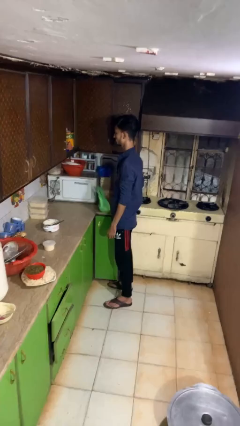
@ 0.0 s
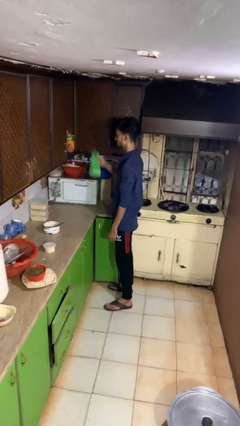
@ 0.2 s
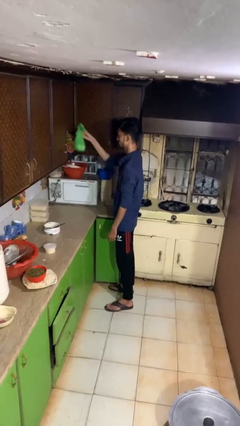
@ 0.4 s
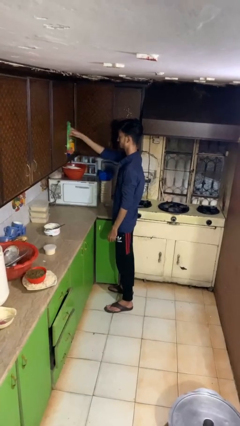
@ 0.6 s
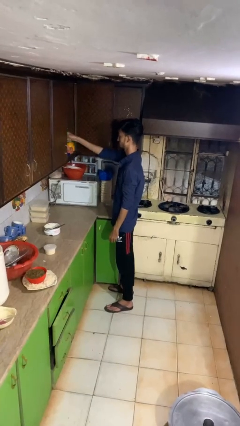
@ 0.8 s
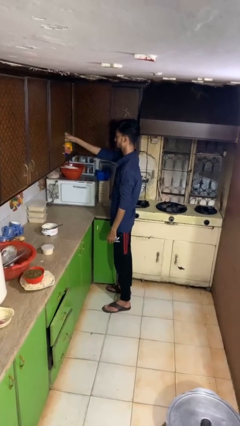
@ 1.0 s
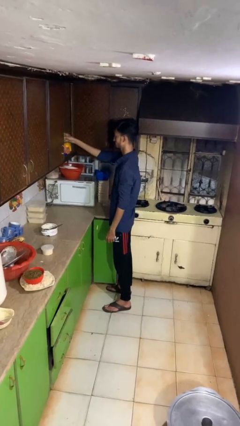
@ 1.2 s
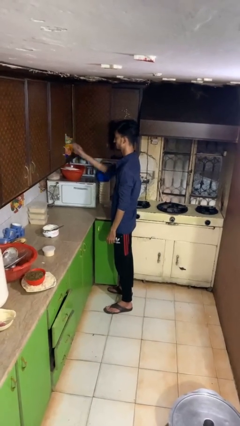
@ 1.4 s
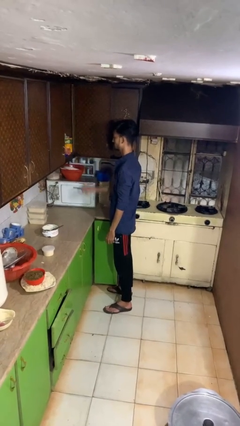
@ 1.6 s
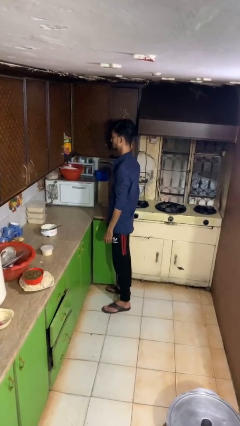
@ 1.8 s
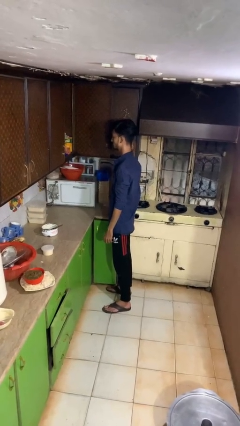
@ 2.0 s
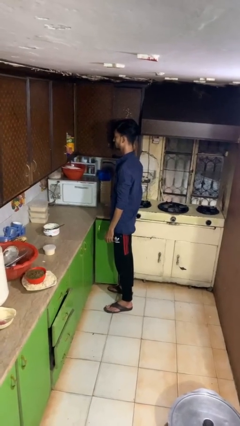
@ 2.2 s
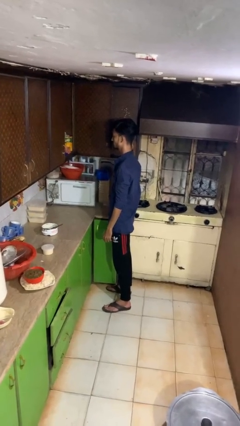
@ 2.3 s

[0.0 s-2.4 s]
person loads groceries into cabinet

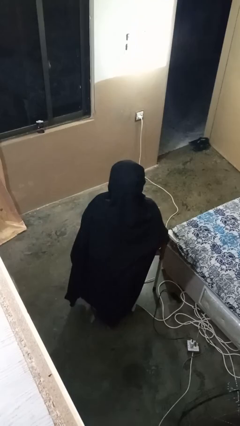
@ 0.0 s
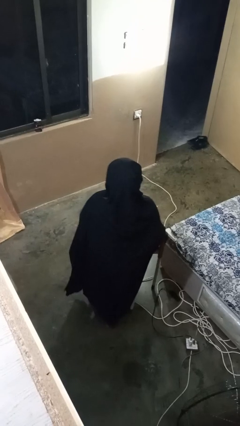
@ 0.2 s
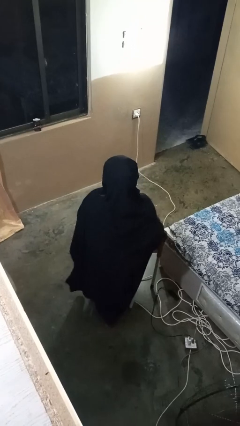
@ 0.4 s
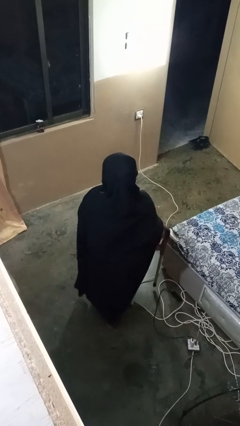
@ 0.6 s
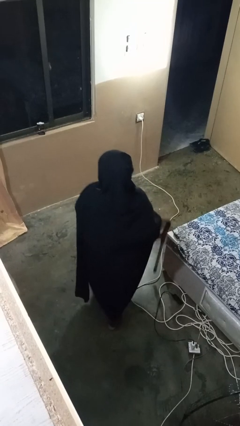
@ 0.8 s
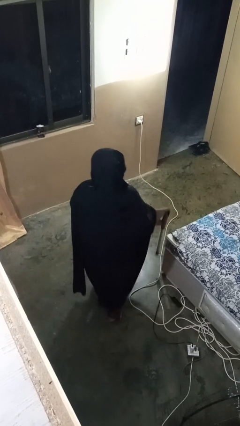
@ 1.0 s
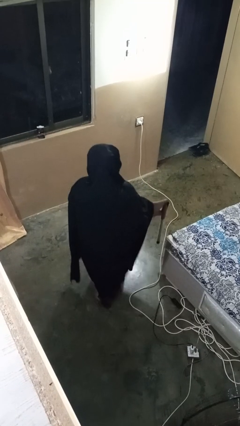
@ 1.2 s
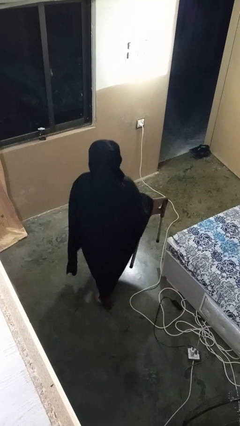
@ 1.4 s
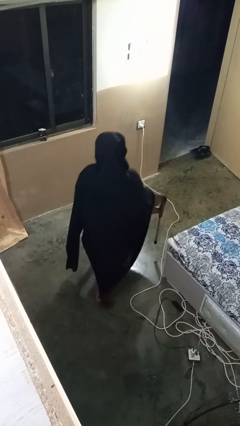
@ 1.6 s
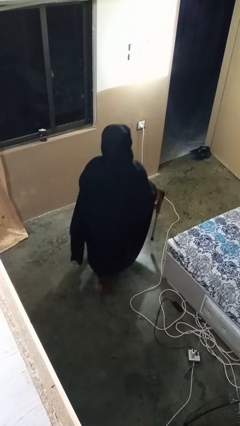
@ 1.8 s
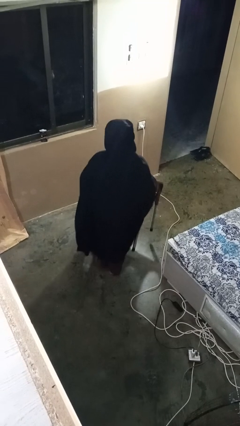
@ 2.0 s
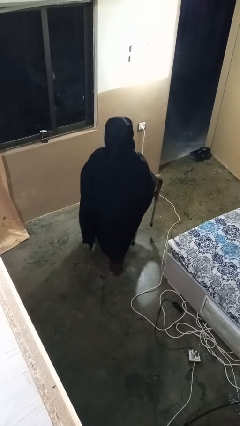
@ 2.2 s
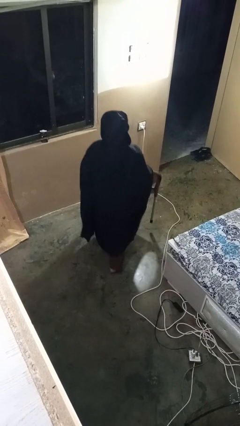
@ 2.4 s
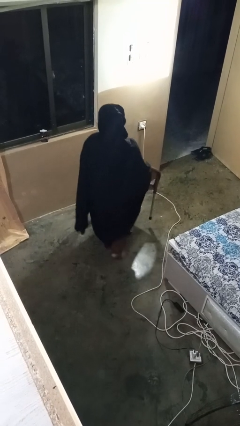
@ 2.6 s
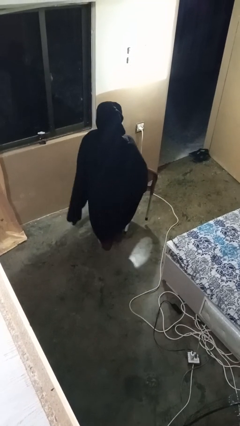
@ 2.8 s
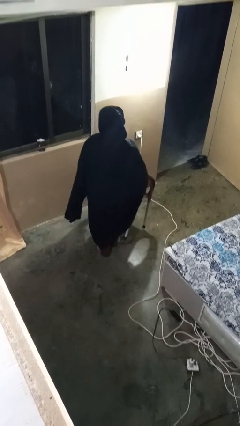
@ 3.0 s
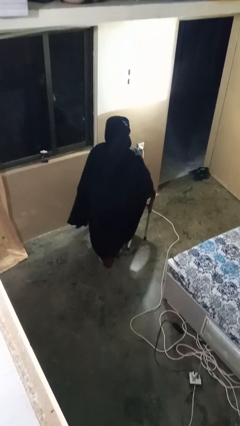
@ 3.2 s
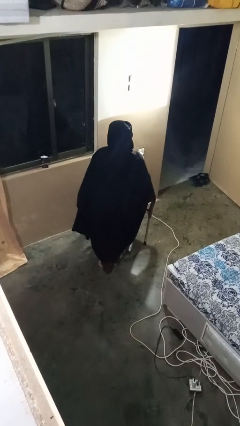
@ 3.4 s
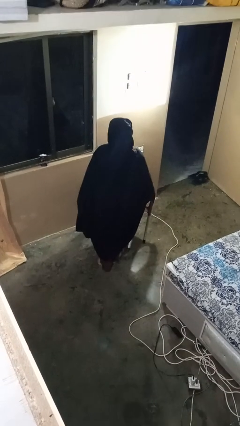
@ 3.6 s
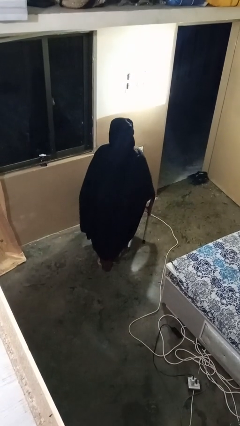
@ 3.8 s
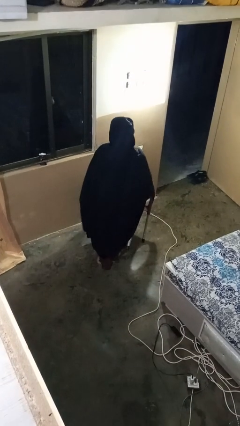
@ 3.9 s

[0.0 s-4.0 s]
person carries furniture

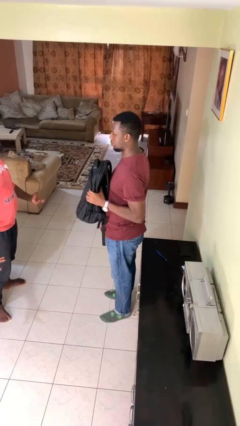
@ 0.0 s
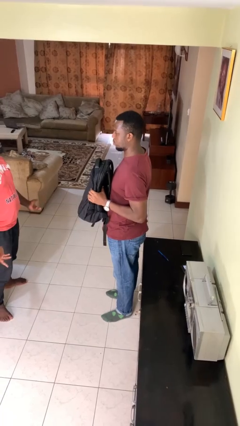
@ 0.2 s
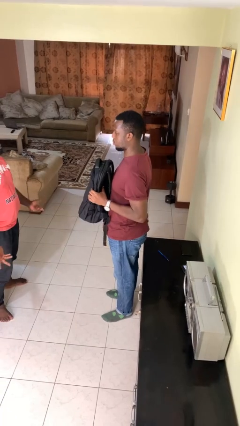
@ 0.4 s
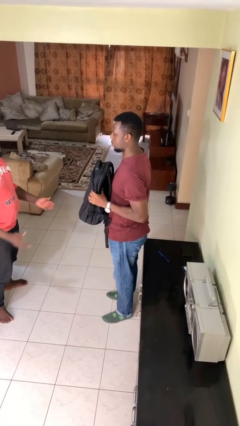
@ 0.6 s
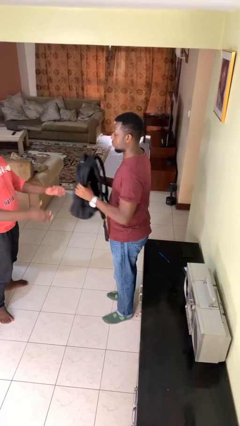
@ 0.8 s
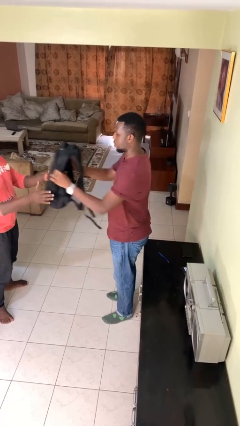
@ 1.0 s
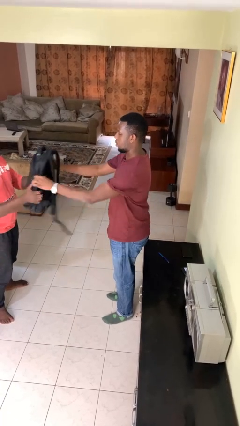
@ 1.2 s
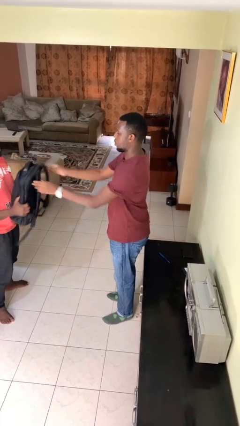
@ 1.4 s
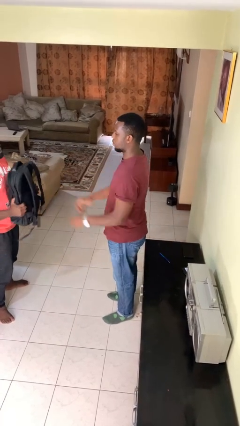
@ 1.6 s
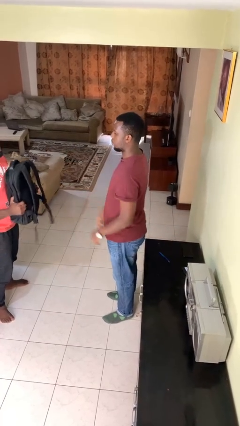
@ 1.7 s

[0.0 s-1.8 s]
person transfers object to person

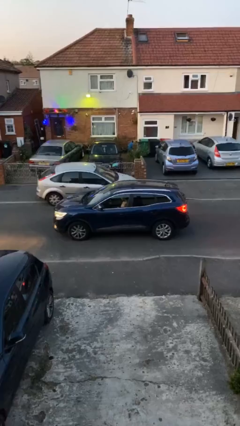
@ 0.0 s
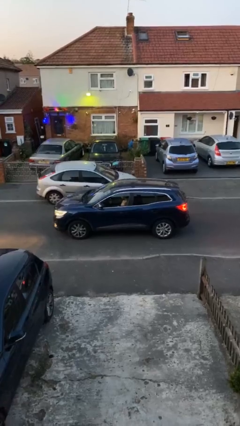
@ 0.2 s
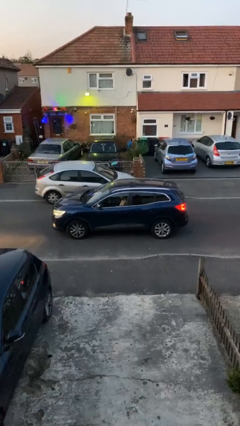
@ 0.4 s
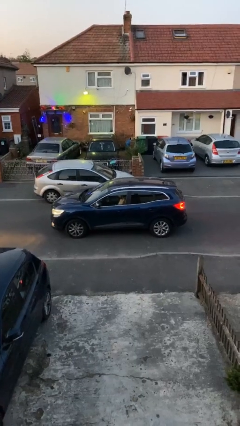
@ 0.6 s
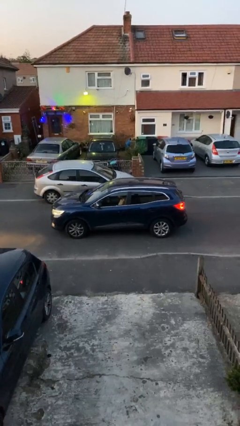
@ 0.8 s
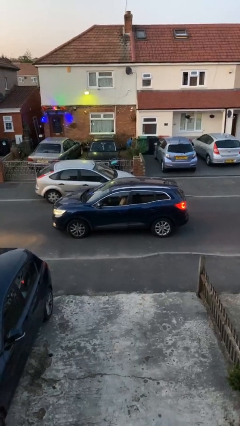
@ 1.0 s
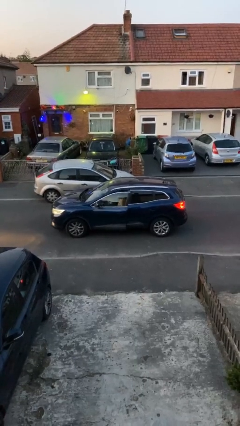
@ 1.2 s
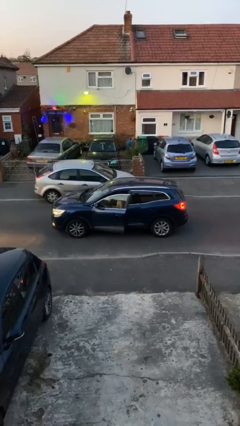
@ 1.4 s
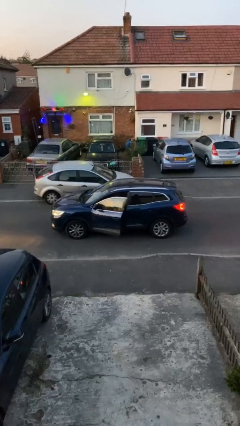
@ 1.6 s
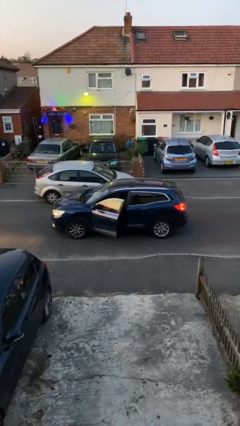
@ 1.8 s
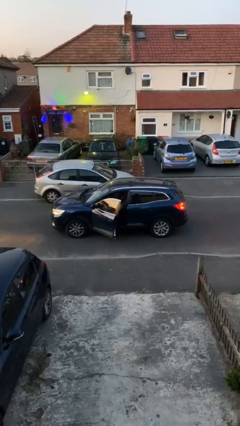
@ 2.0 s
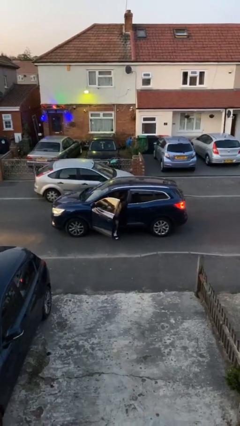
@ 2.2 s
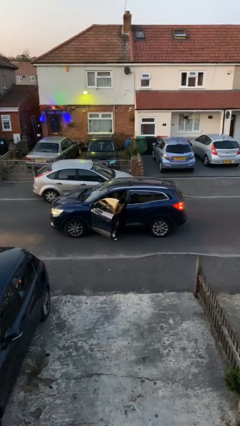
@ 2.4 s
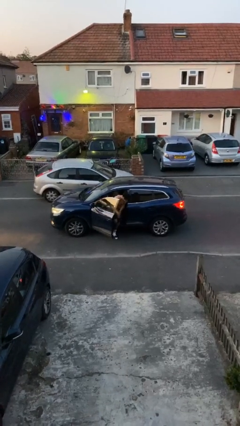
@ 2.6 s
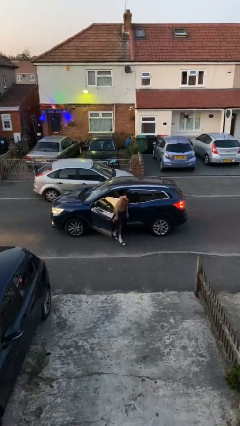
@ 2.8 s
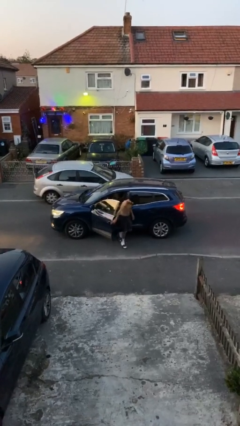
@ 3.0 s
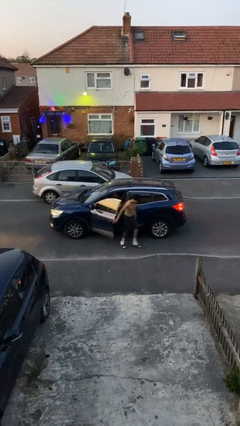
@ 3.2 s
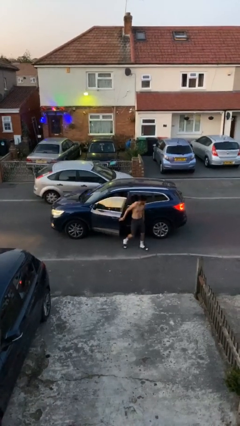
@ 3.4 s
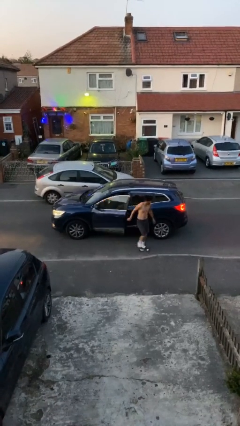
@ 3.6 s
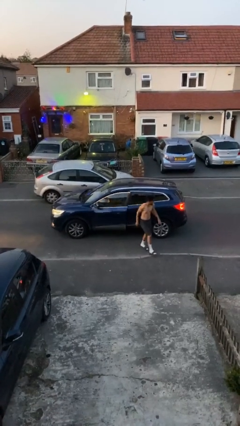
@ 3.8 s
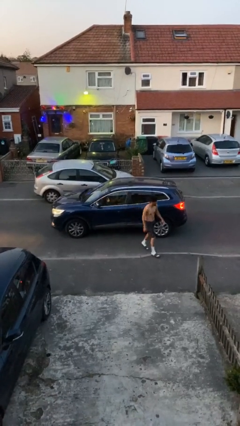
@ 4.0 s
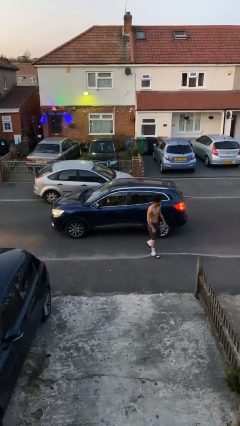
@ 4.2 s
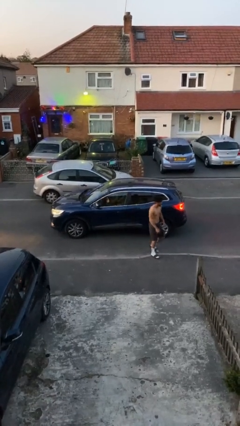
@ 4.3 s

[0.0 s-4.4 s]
car drops off person

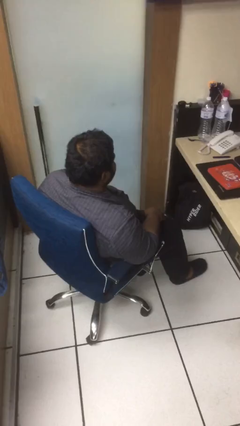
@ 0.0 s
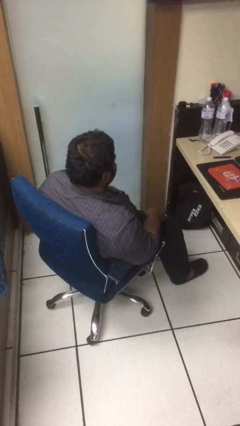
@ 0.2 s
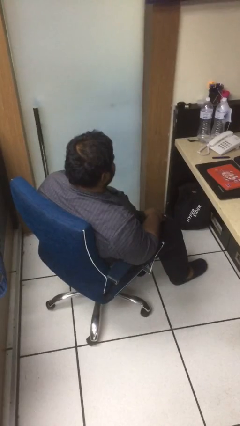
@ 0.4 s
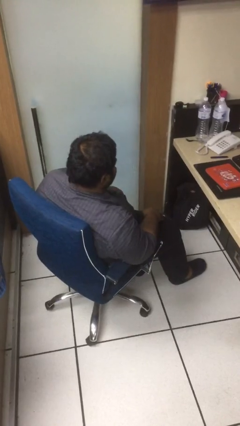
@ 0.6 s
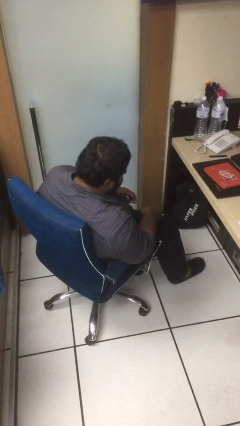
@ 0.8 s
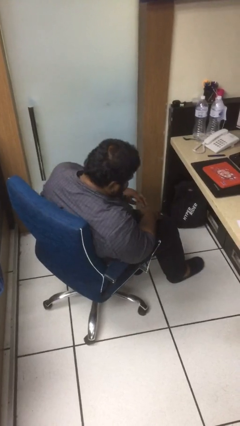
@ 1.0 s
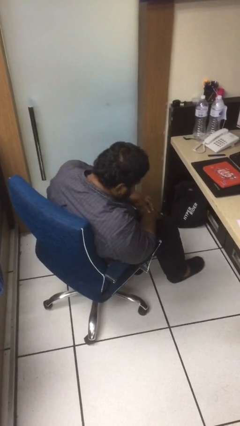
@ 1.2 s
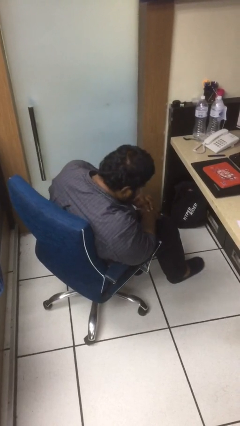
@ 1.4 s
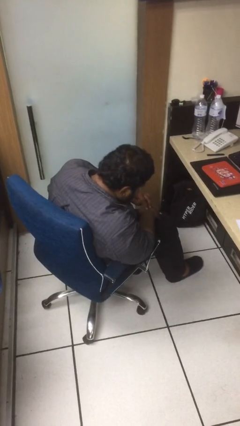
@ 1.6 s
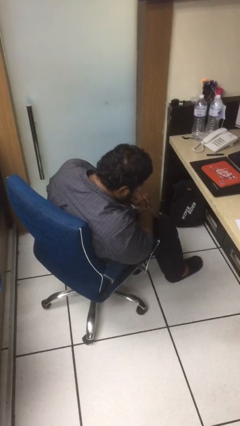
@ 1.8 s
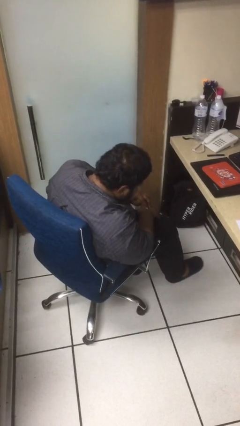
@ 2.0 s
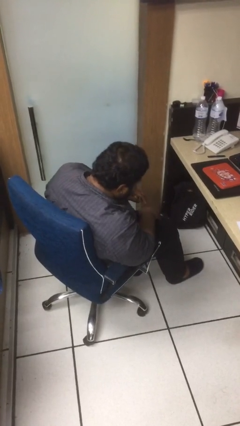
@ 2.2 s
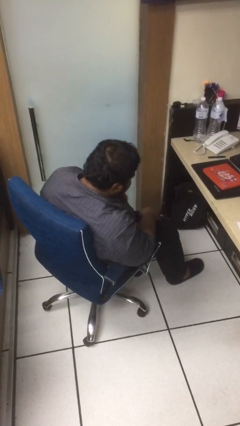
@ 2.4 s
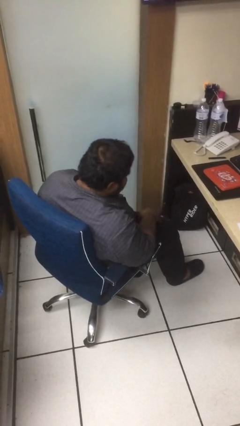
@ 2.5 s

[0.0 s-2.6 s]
person looks at hands in lap

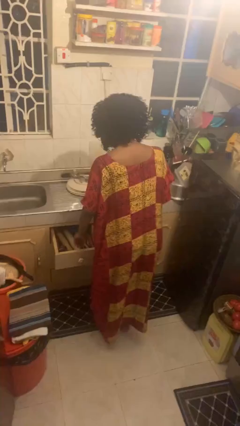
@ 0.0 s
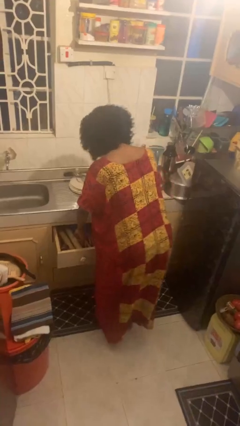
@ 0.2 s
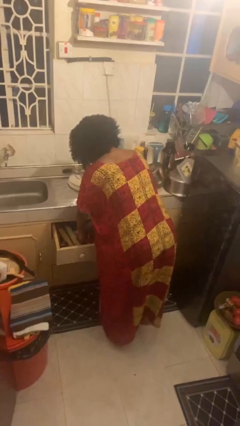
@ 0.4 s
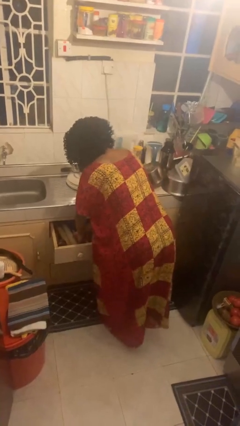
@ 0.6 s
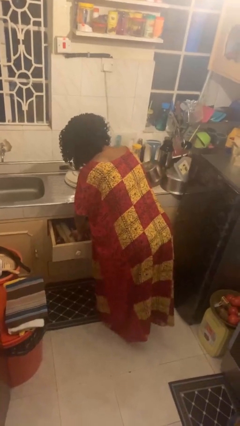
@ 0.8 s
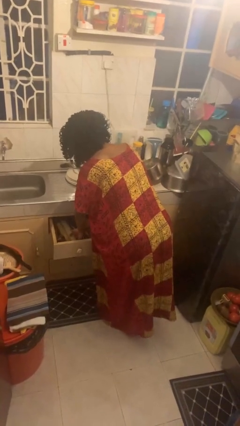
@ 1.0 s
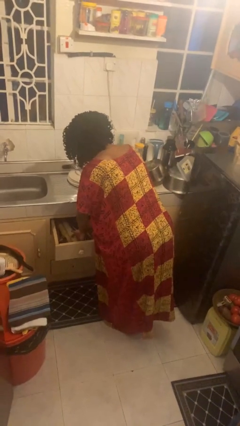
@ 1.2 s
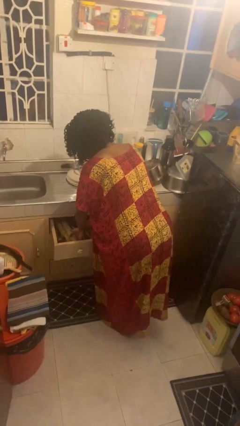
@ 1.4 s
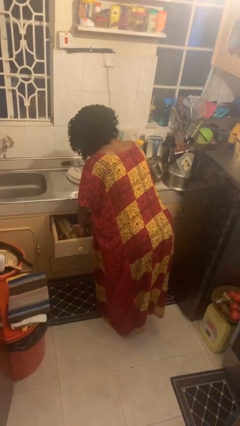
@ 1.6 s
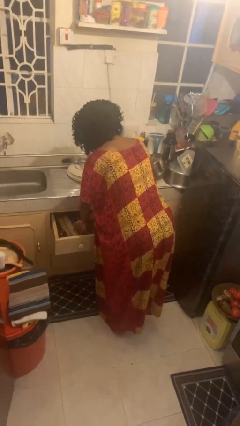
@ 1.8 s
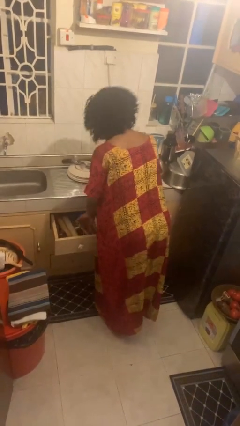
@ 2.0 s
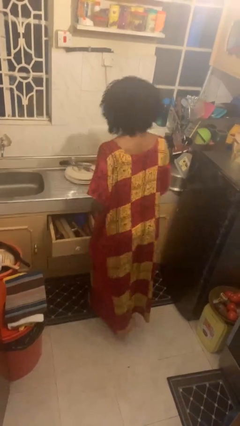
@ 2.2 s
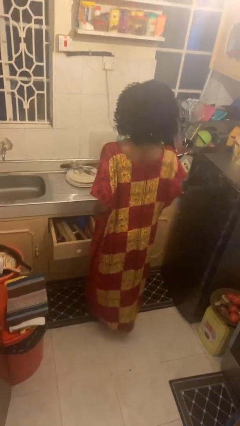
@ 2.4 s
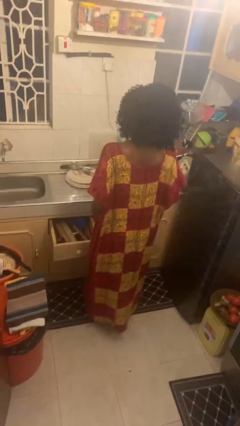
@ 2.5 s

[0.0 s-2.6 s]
person searches in kitchen drawer
